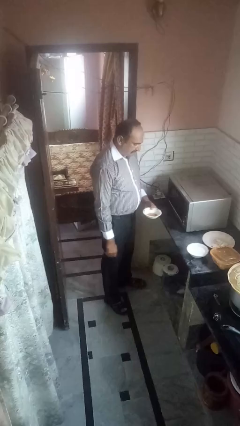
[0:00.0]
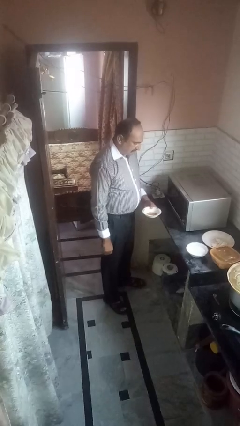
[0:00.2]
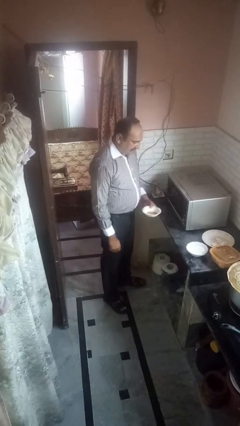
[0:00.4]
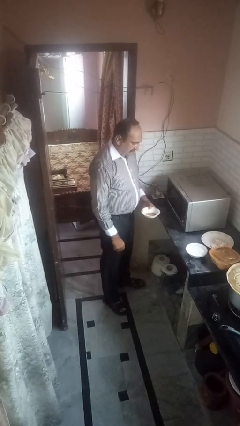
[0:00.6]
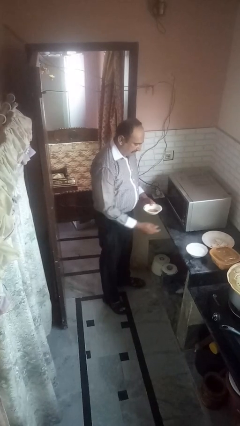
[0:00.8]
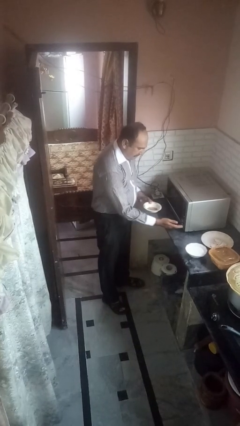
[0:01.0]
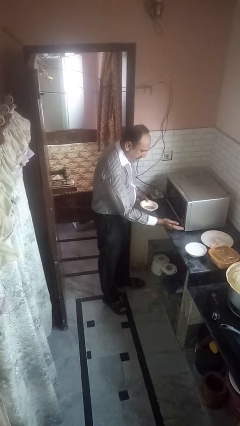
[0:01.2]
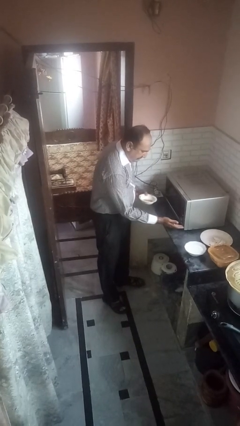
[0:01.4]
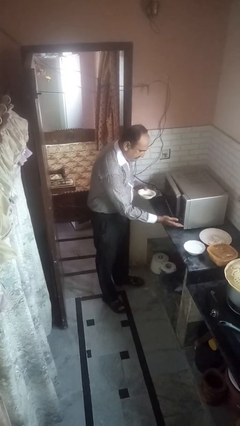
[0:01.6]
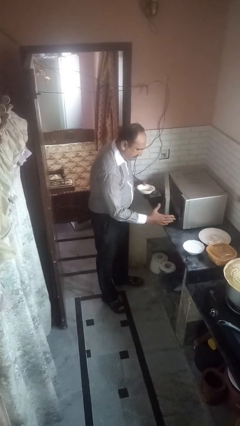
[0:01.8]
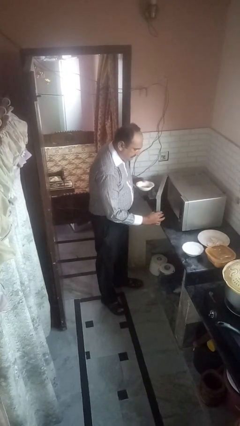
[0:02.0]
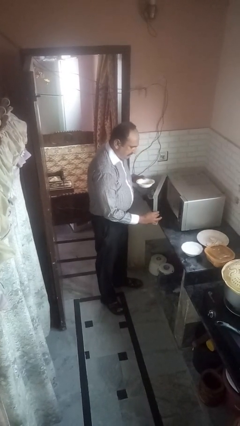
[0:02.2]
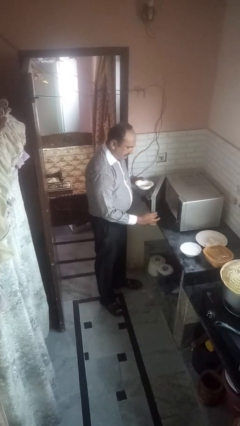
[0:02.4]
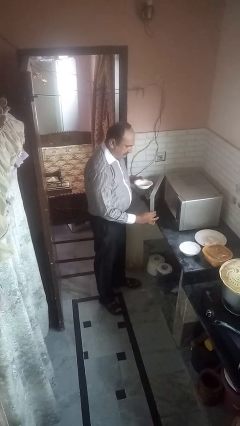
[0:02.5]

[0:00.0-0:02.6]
person opens microwave

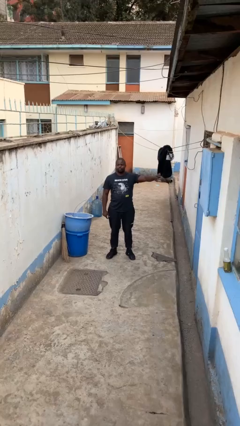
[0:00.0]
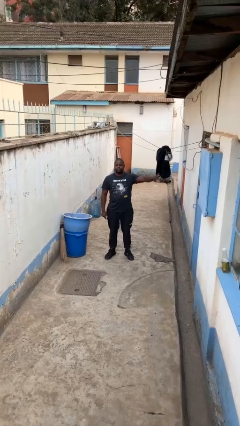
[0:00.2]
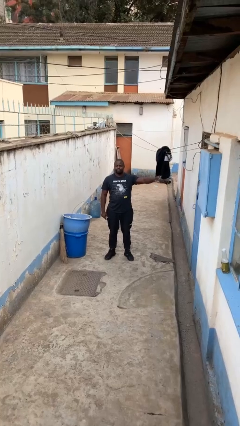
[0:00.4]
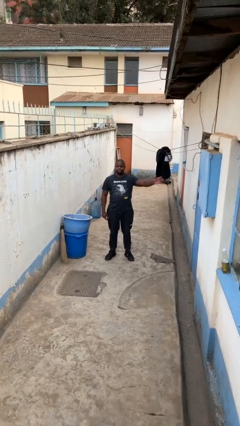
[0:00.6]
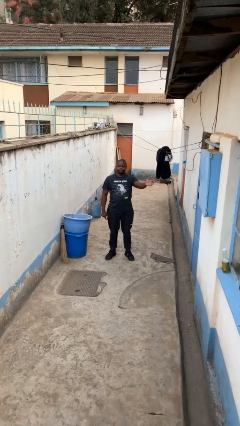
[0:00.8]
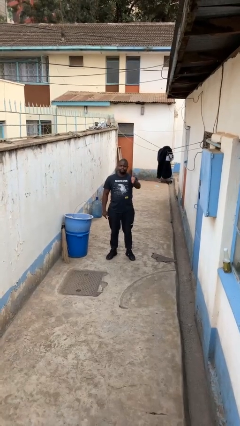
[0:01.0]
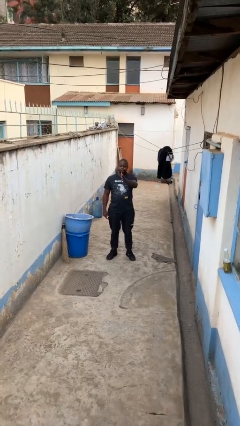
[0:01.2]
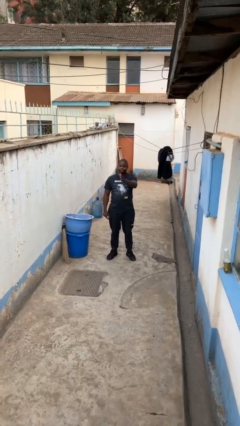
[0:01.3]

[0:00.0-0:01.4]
person gestures swipe left

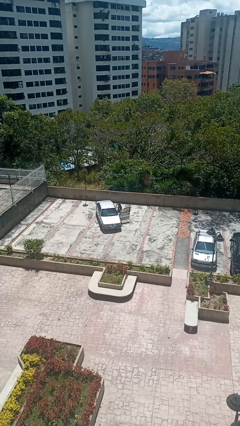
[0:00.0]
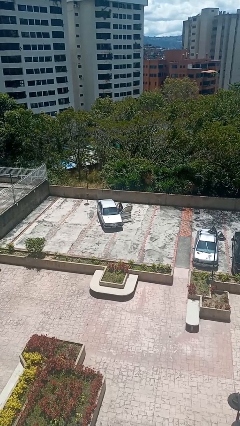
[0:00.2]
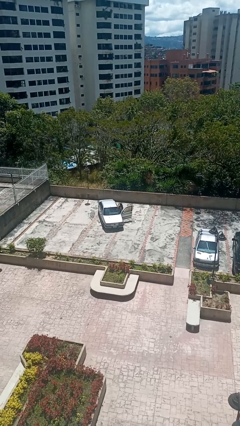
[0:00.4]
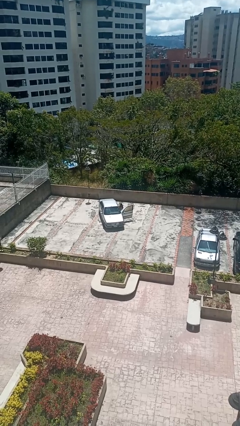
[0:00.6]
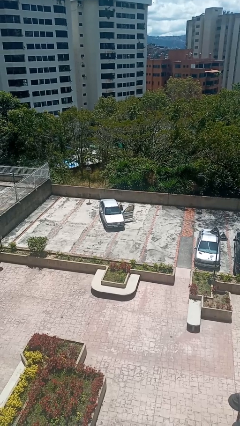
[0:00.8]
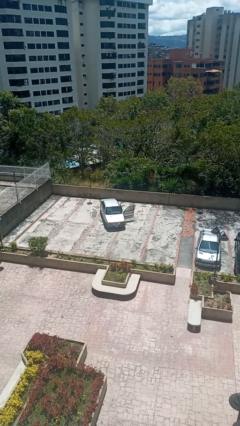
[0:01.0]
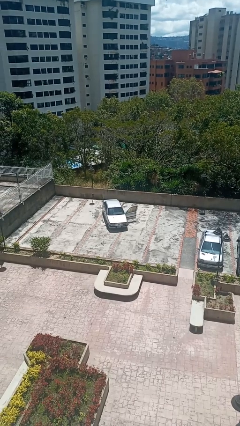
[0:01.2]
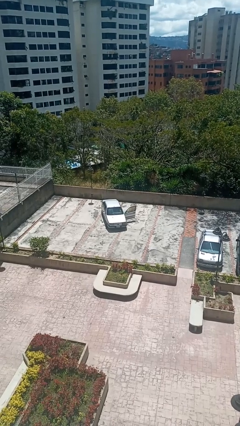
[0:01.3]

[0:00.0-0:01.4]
person enters car

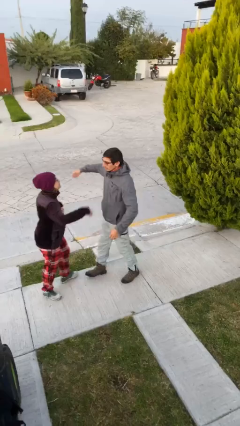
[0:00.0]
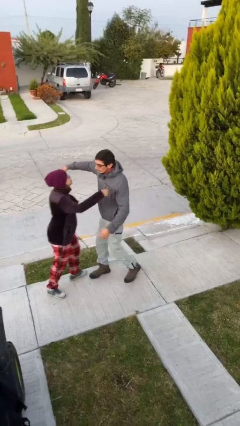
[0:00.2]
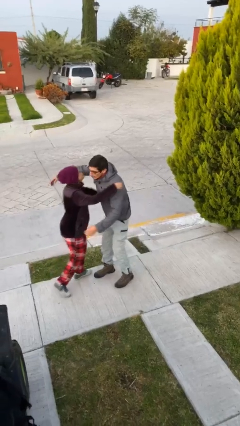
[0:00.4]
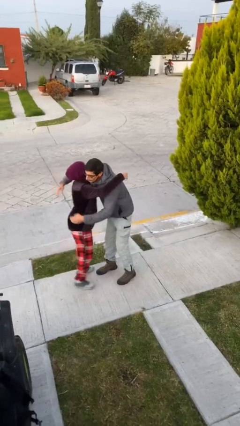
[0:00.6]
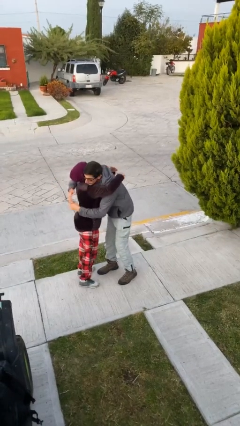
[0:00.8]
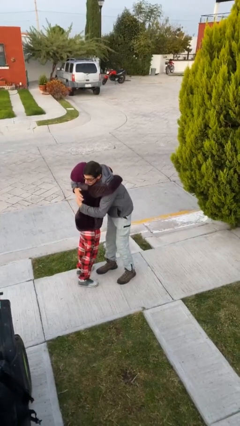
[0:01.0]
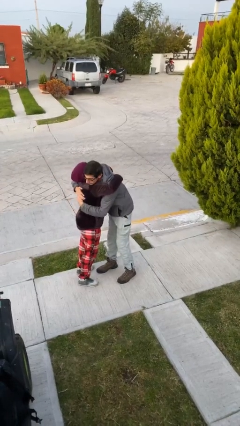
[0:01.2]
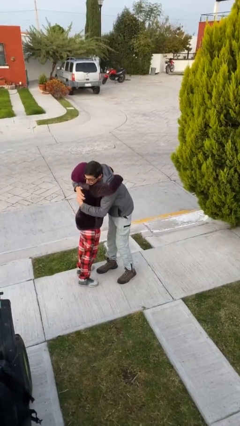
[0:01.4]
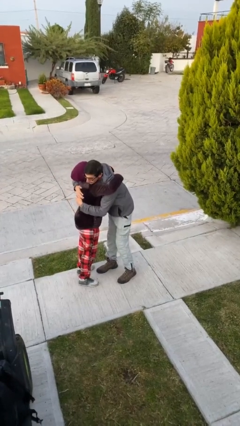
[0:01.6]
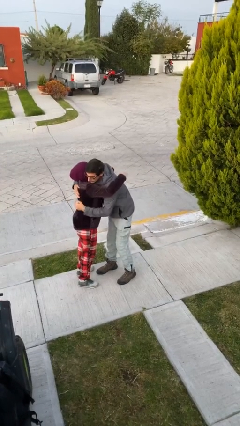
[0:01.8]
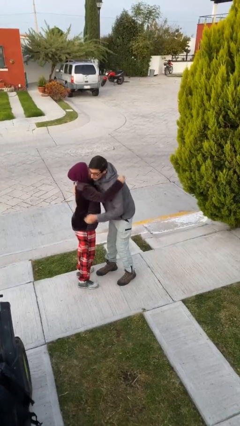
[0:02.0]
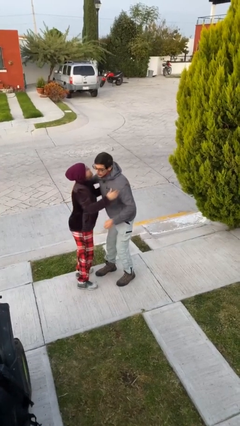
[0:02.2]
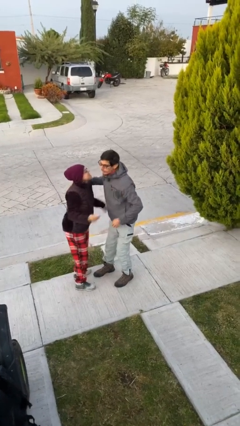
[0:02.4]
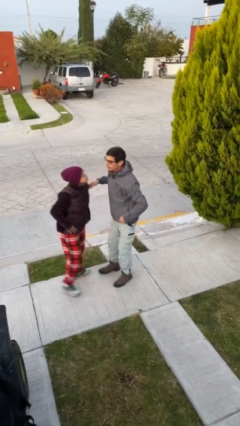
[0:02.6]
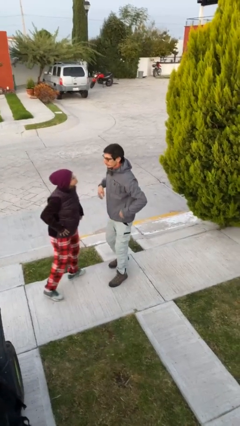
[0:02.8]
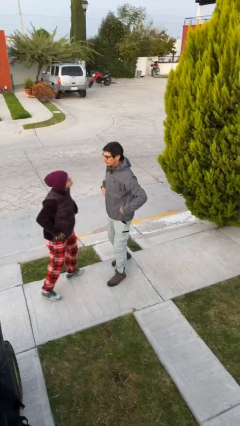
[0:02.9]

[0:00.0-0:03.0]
person embraces person

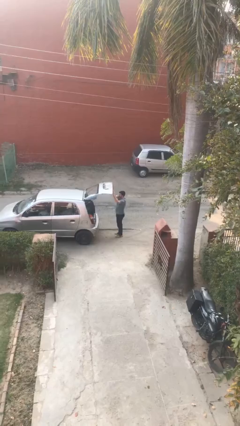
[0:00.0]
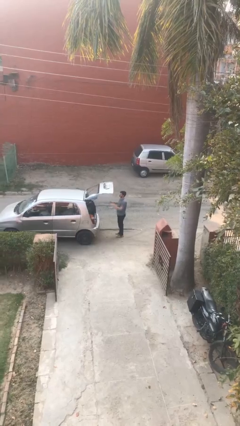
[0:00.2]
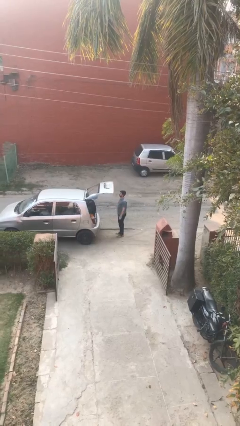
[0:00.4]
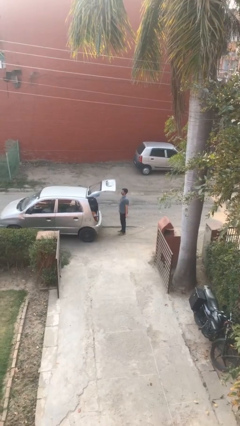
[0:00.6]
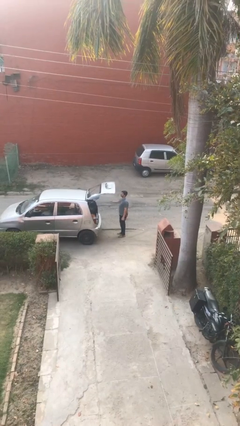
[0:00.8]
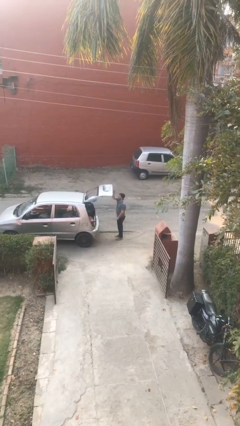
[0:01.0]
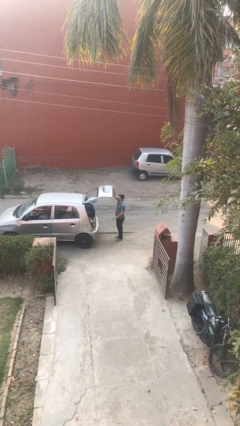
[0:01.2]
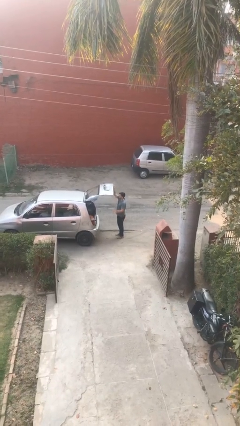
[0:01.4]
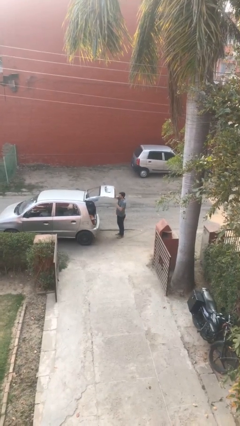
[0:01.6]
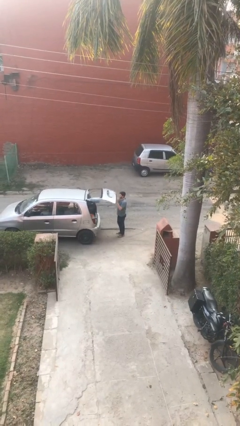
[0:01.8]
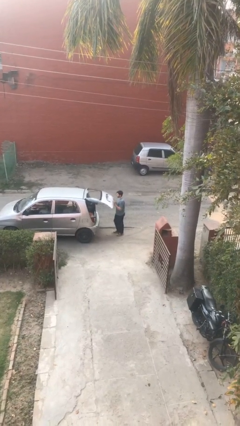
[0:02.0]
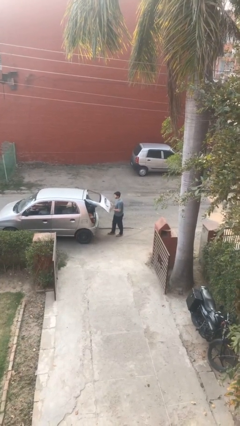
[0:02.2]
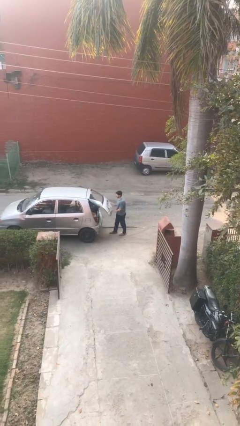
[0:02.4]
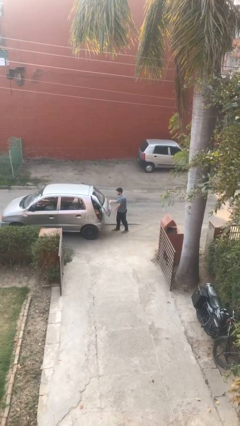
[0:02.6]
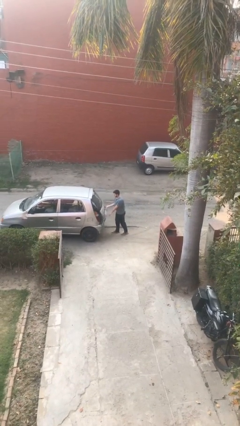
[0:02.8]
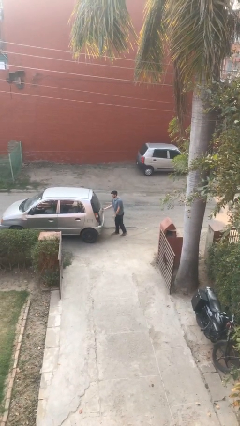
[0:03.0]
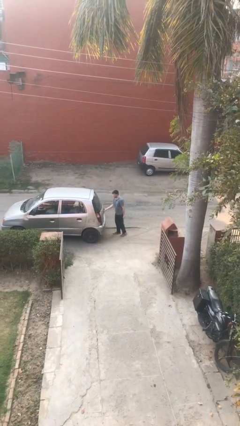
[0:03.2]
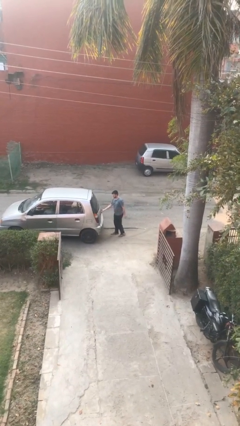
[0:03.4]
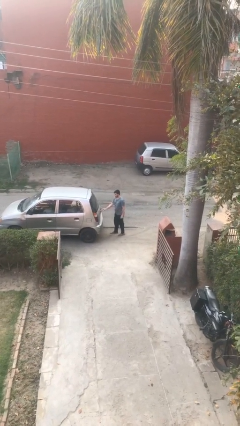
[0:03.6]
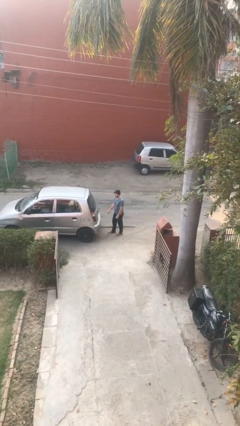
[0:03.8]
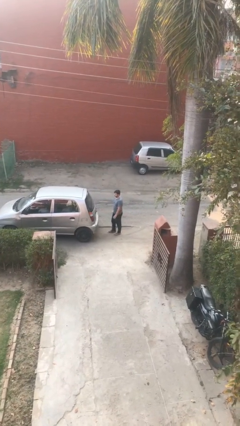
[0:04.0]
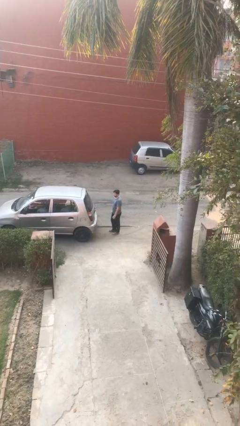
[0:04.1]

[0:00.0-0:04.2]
person closes car trunk

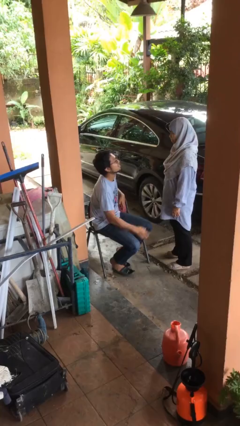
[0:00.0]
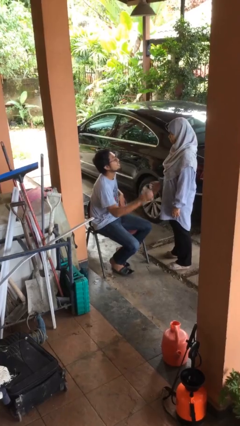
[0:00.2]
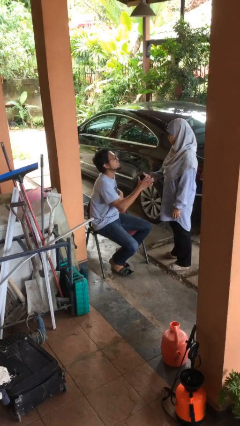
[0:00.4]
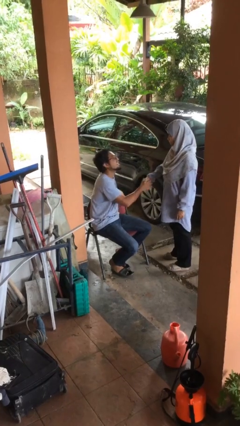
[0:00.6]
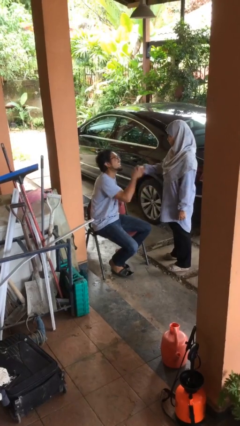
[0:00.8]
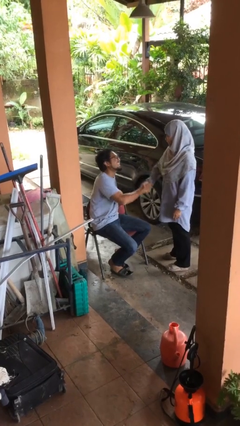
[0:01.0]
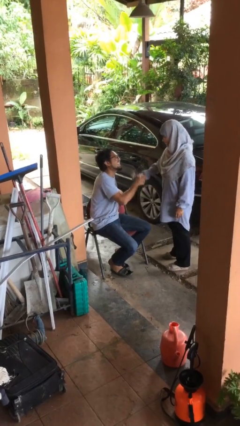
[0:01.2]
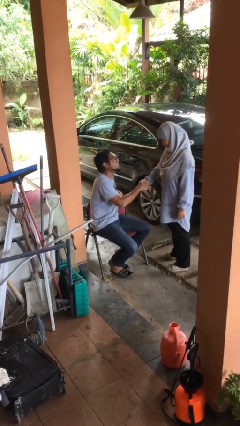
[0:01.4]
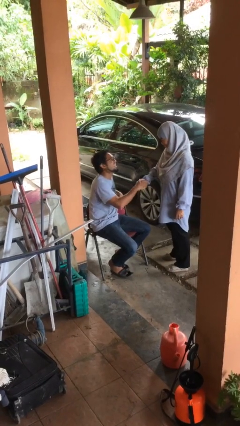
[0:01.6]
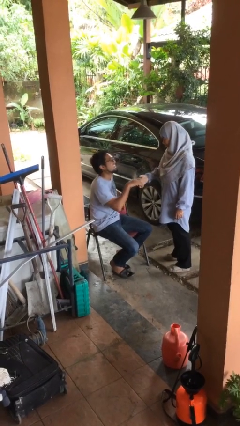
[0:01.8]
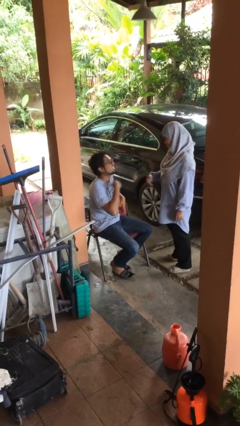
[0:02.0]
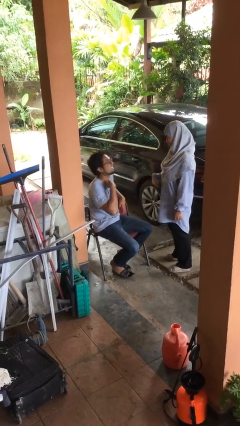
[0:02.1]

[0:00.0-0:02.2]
person shakes hand

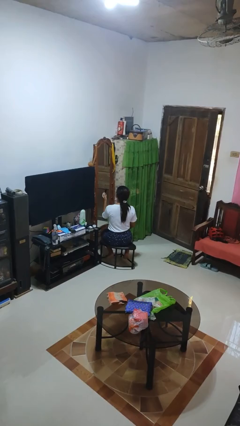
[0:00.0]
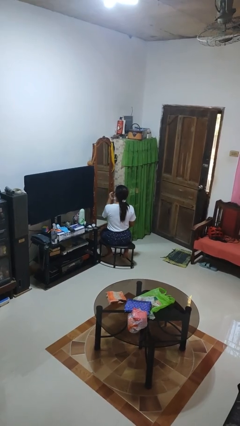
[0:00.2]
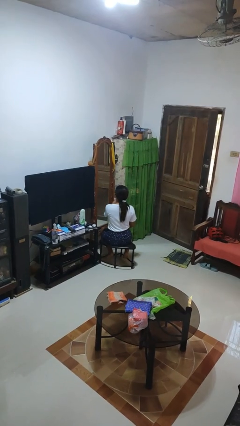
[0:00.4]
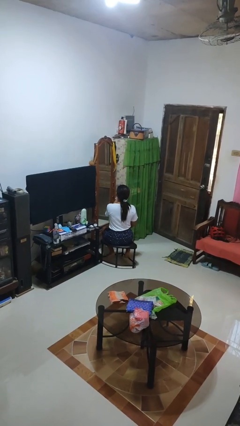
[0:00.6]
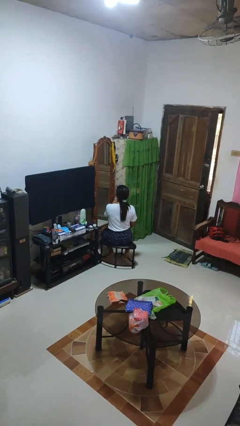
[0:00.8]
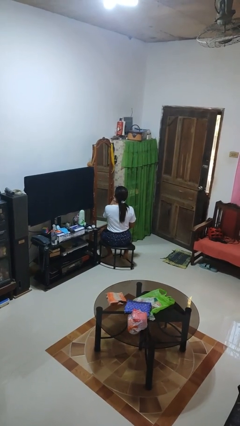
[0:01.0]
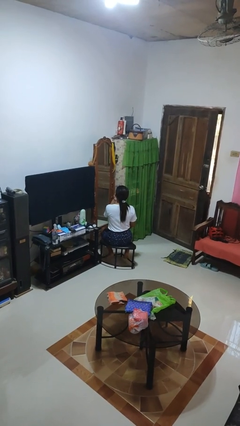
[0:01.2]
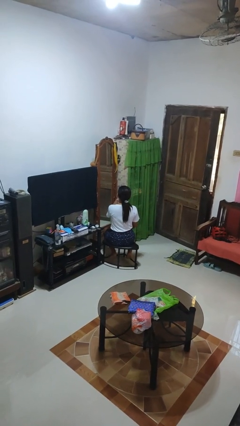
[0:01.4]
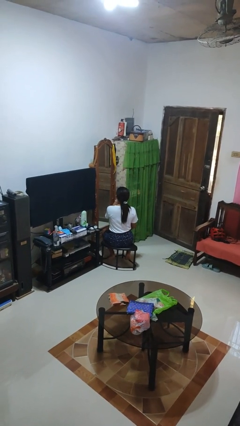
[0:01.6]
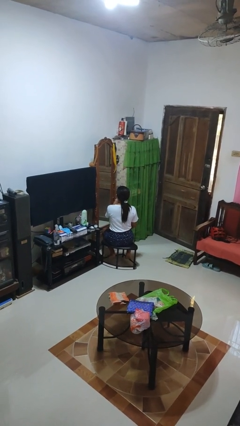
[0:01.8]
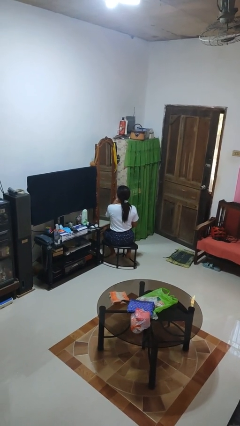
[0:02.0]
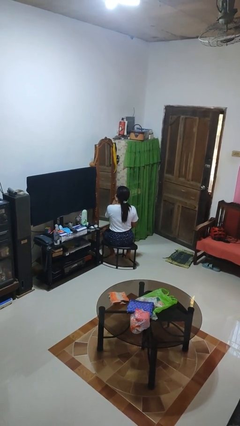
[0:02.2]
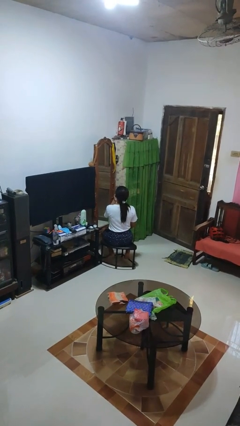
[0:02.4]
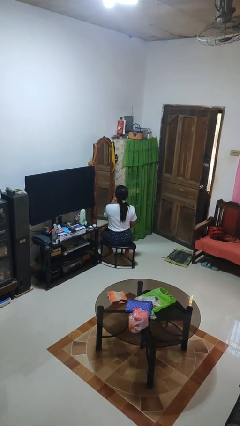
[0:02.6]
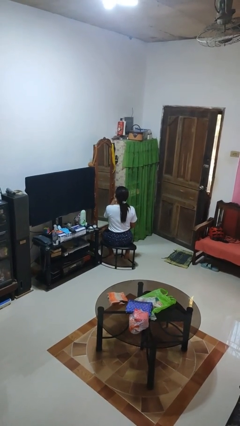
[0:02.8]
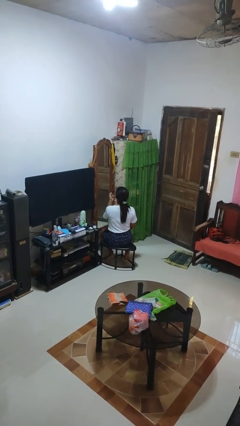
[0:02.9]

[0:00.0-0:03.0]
person applies lip makeup
